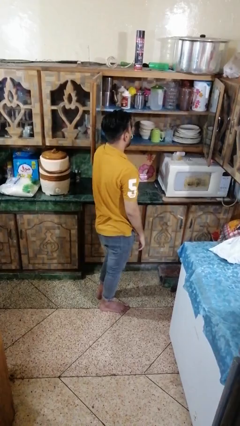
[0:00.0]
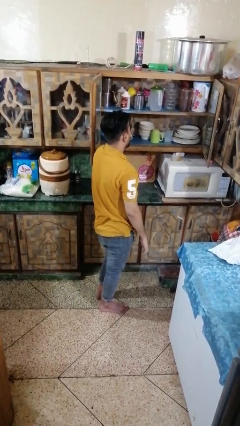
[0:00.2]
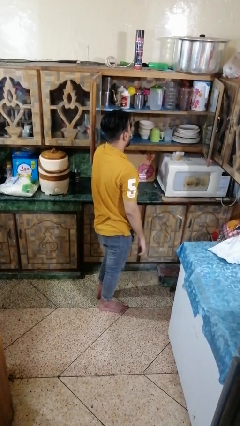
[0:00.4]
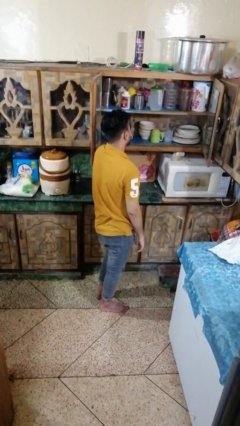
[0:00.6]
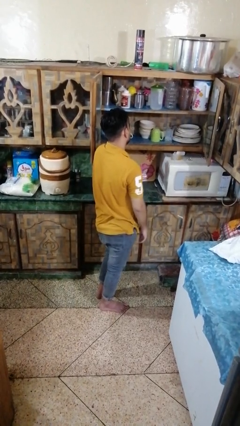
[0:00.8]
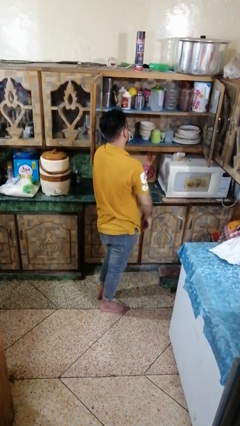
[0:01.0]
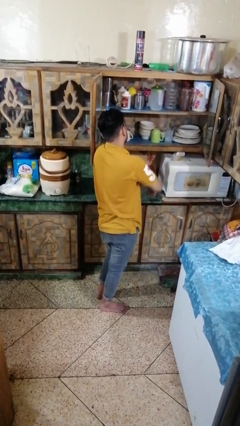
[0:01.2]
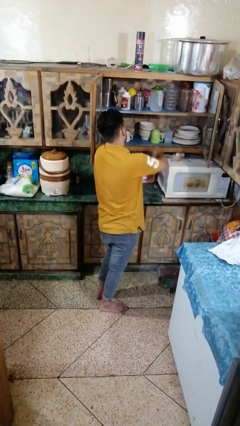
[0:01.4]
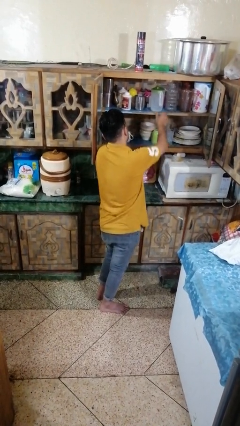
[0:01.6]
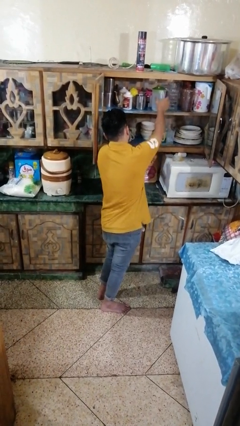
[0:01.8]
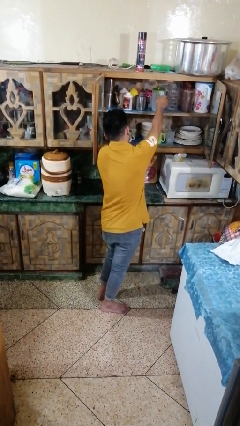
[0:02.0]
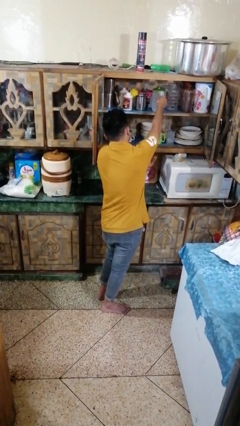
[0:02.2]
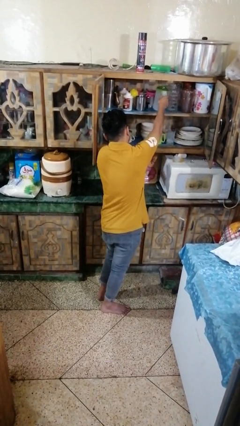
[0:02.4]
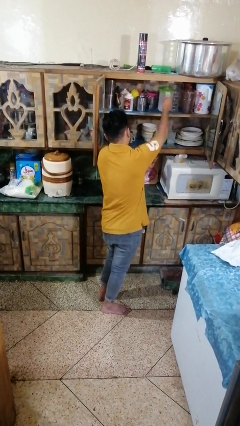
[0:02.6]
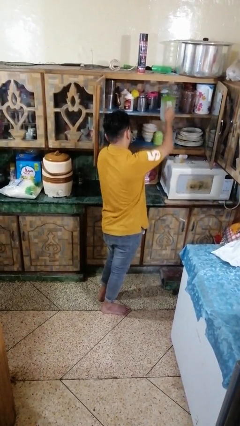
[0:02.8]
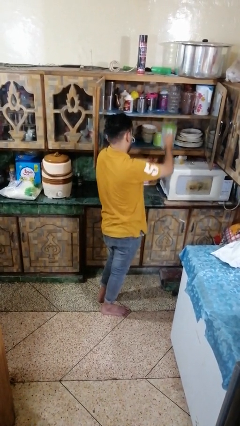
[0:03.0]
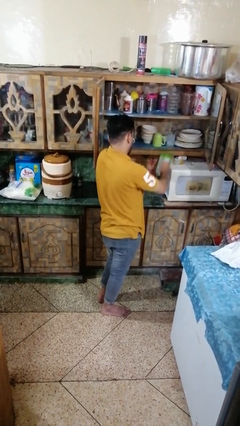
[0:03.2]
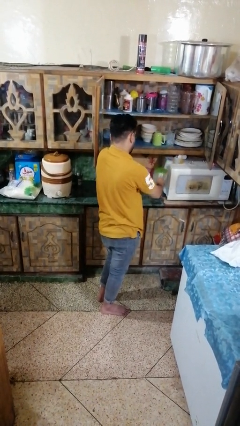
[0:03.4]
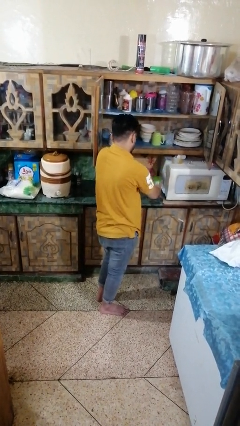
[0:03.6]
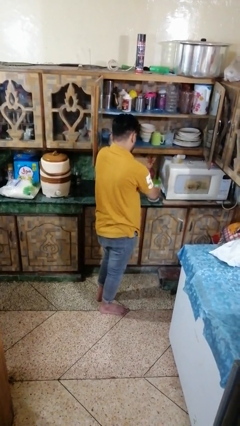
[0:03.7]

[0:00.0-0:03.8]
person takes object from cabinet

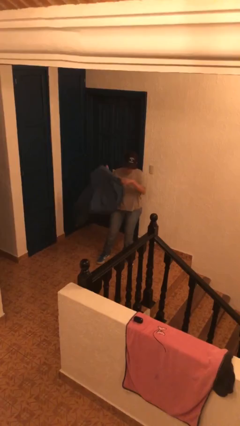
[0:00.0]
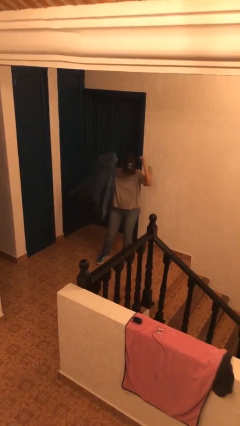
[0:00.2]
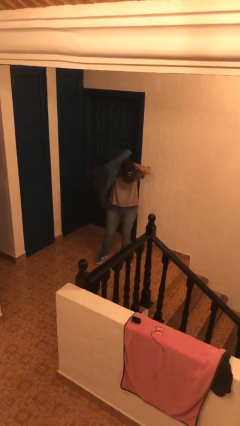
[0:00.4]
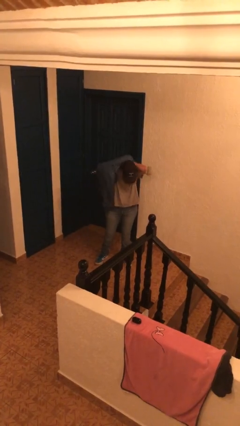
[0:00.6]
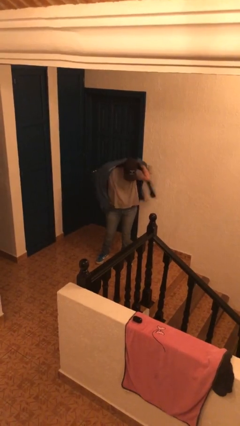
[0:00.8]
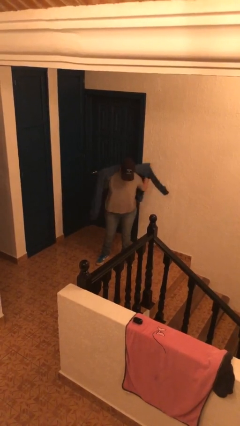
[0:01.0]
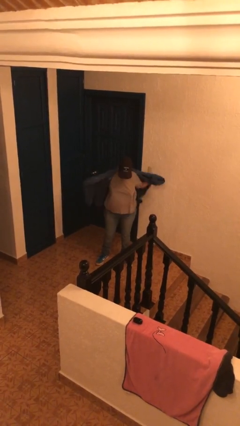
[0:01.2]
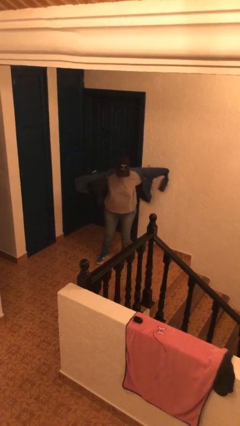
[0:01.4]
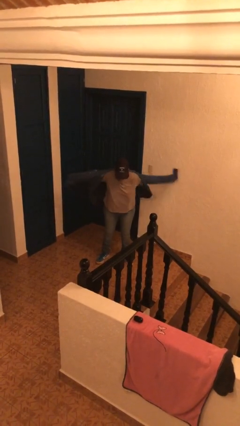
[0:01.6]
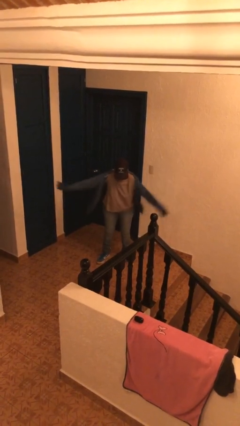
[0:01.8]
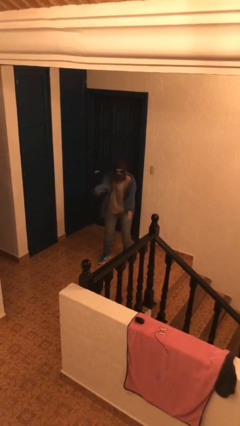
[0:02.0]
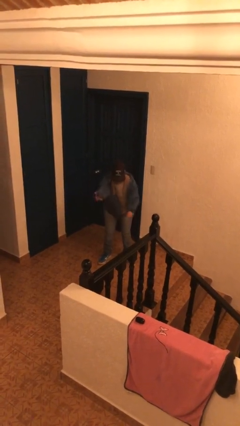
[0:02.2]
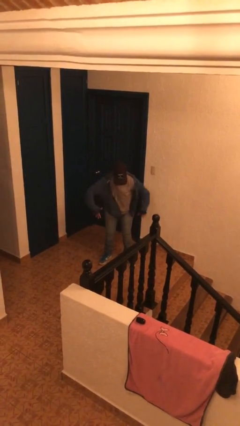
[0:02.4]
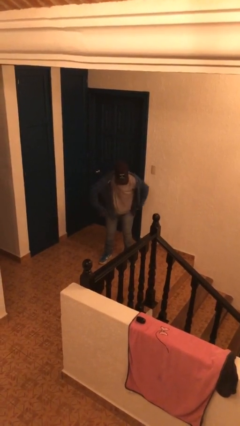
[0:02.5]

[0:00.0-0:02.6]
person puts on jacket

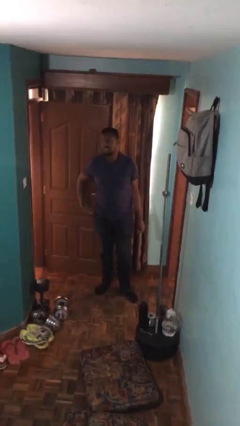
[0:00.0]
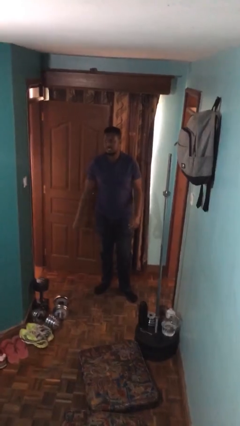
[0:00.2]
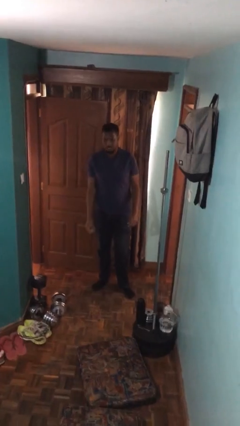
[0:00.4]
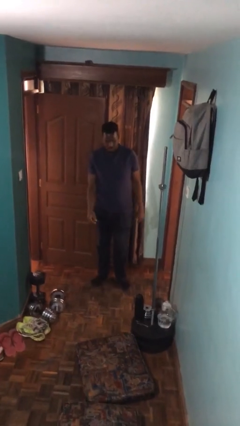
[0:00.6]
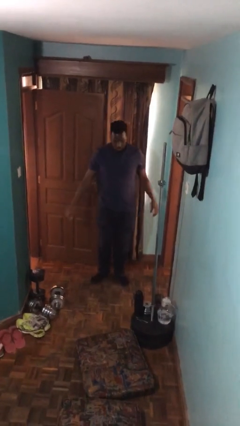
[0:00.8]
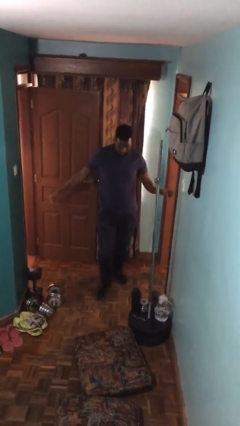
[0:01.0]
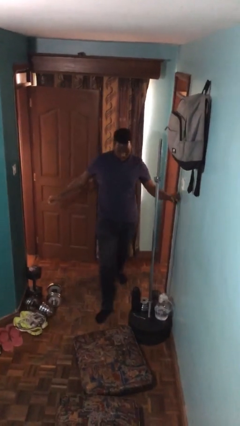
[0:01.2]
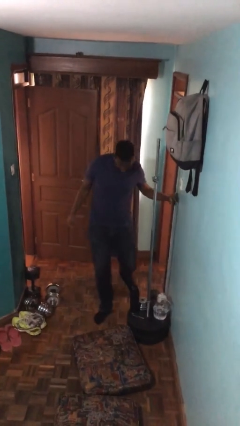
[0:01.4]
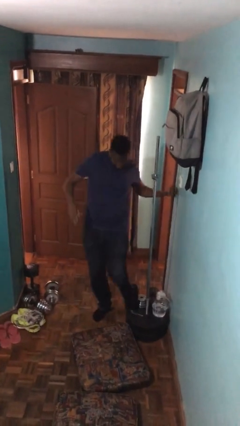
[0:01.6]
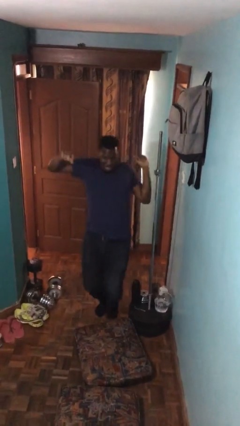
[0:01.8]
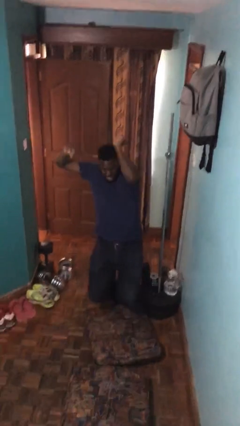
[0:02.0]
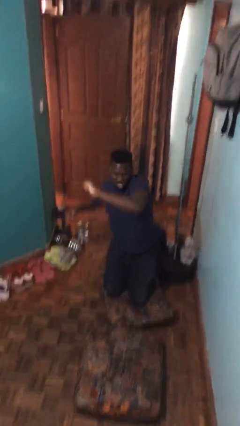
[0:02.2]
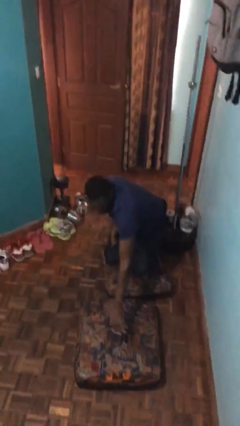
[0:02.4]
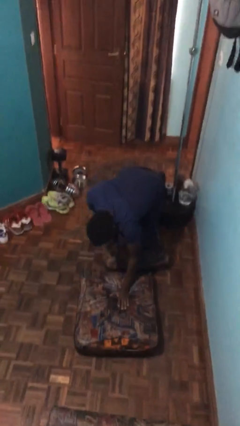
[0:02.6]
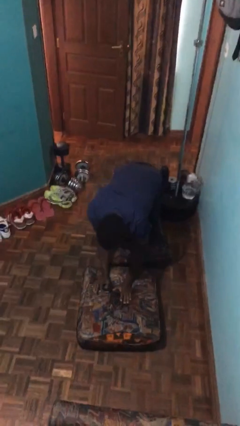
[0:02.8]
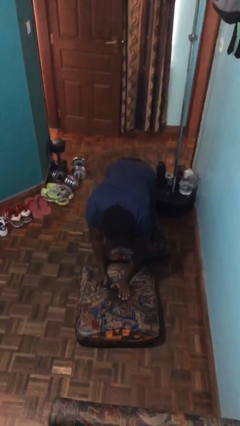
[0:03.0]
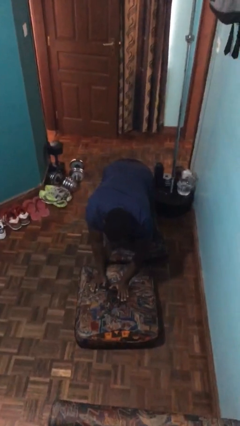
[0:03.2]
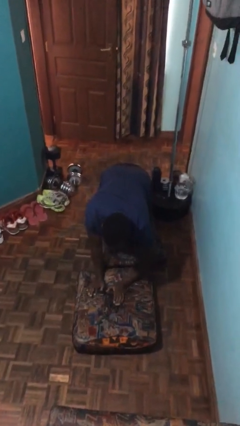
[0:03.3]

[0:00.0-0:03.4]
person trips on object on floor

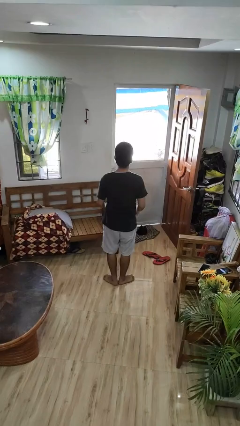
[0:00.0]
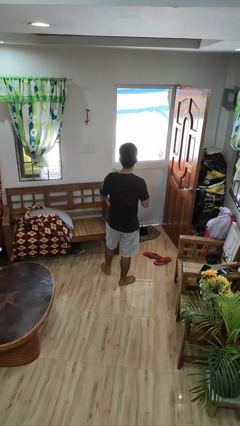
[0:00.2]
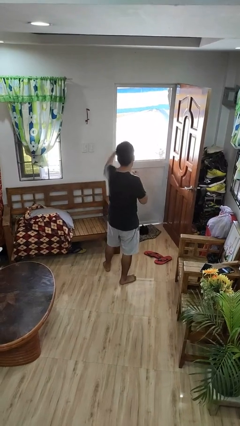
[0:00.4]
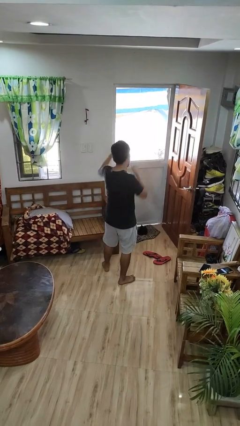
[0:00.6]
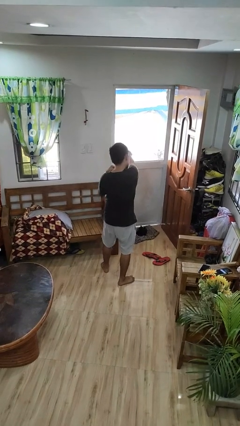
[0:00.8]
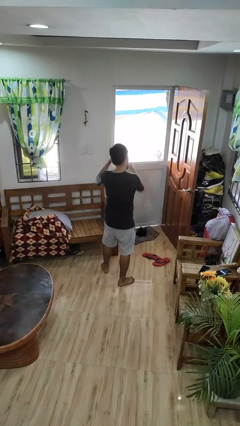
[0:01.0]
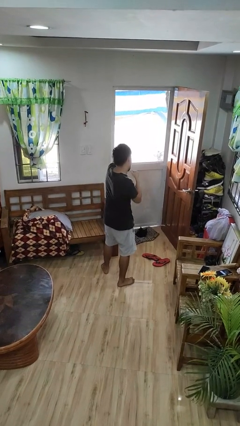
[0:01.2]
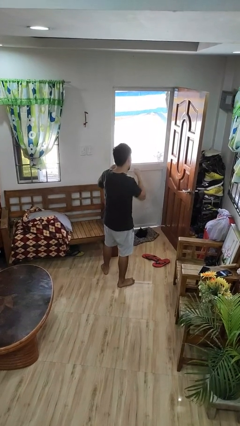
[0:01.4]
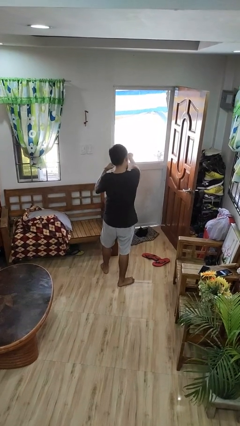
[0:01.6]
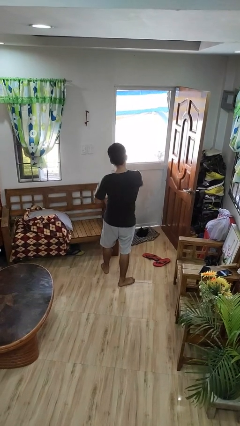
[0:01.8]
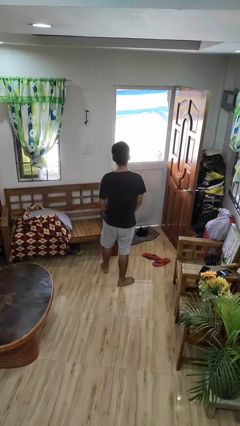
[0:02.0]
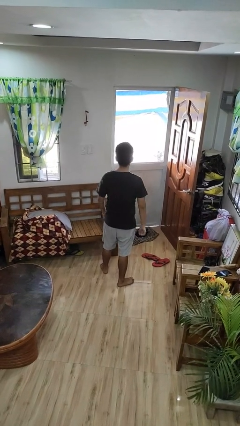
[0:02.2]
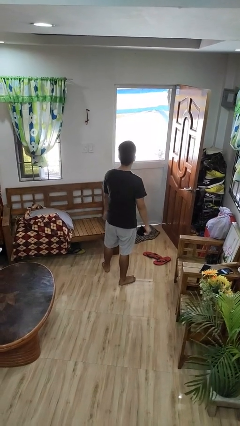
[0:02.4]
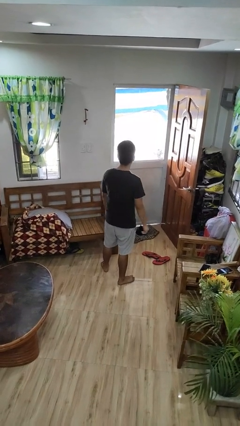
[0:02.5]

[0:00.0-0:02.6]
person punches

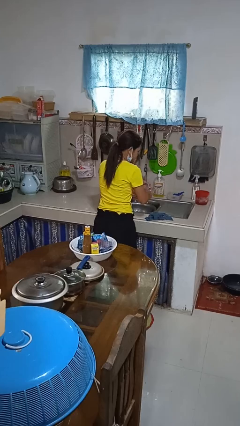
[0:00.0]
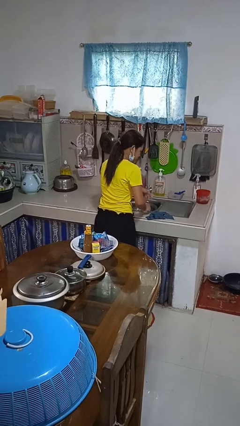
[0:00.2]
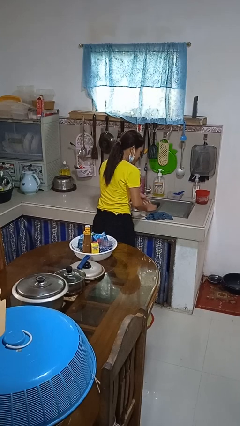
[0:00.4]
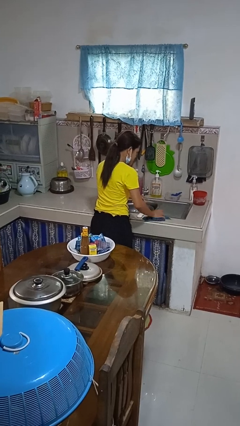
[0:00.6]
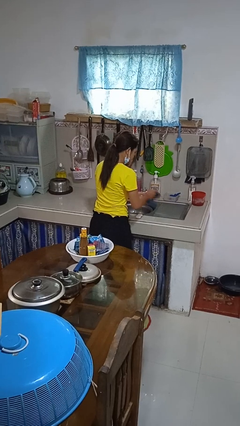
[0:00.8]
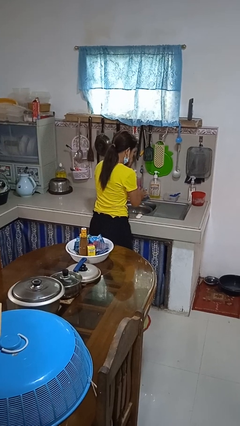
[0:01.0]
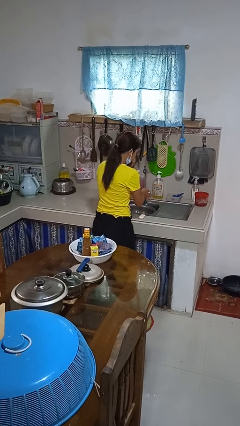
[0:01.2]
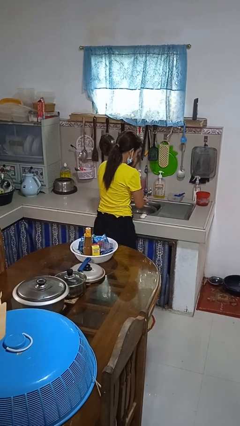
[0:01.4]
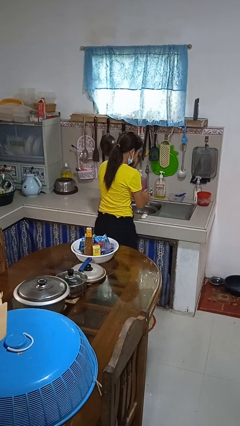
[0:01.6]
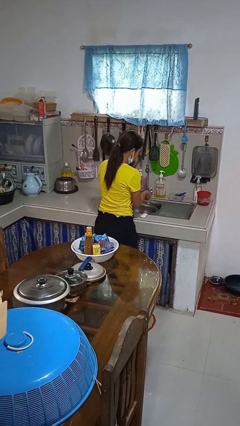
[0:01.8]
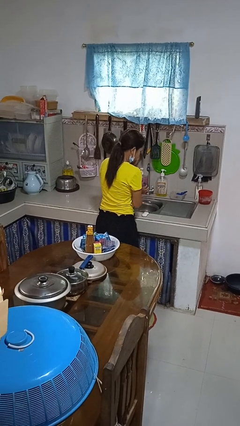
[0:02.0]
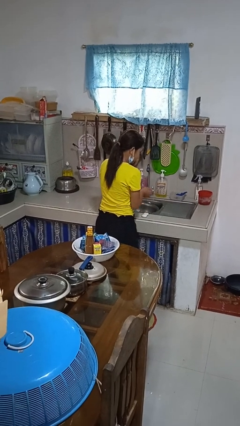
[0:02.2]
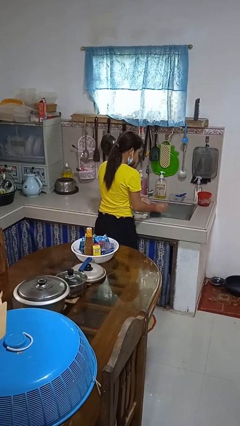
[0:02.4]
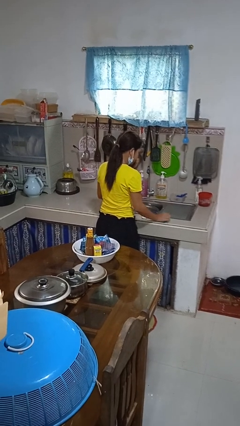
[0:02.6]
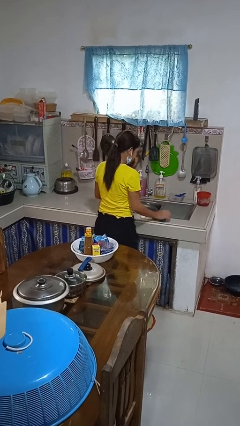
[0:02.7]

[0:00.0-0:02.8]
person dries hands with towel

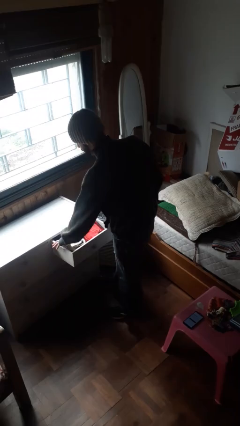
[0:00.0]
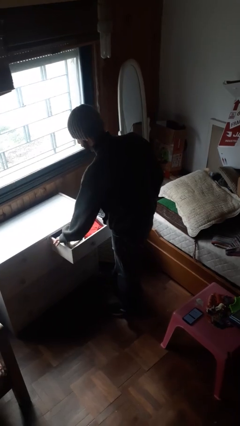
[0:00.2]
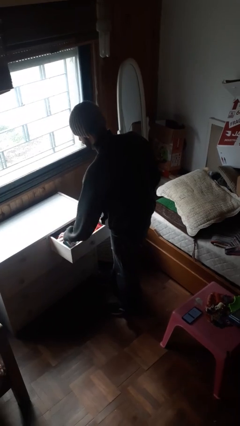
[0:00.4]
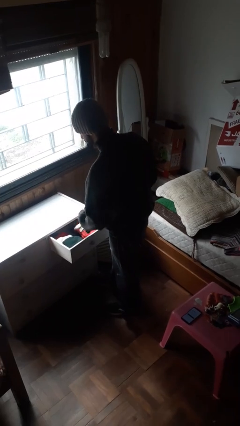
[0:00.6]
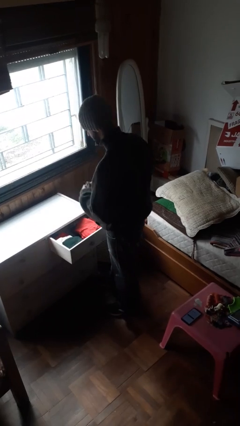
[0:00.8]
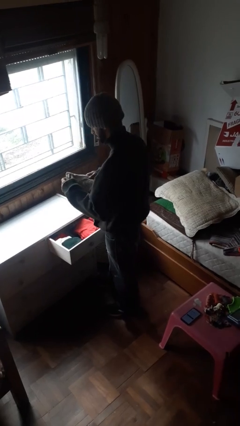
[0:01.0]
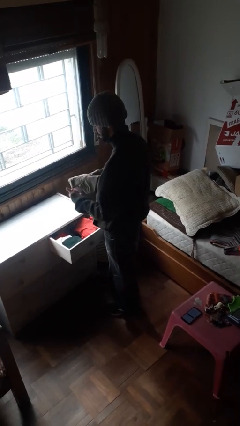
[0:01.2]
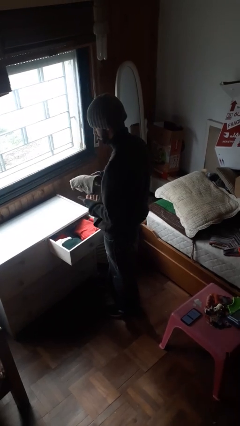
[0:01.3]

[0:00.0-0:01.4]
person takes clothes from dresser
